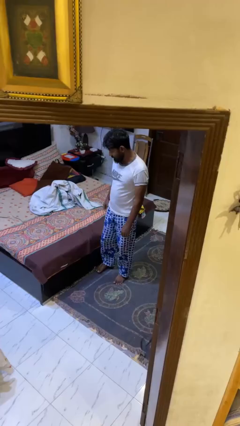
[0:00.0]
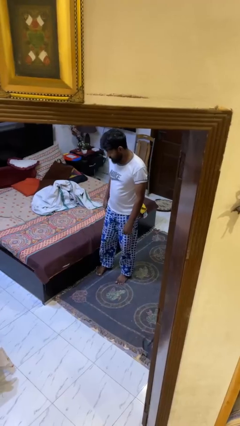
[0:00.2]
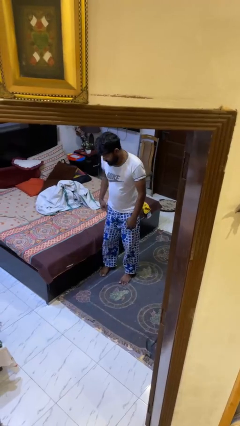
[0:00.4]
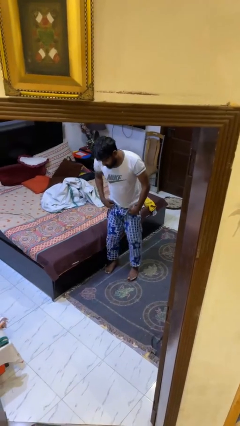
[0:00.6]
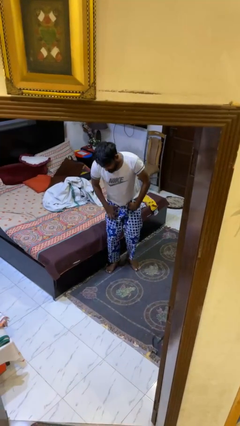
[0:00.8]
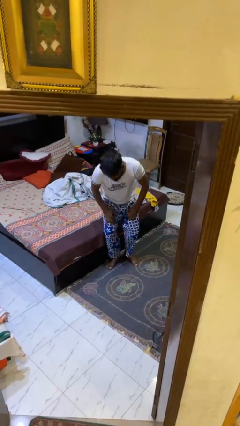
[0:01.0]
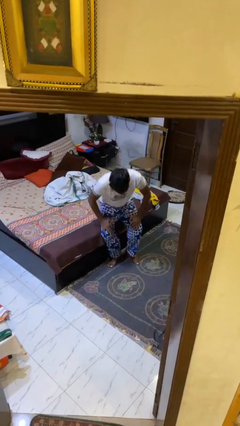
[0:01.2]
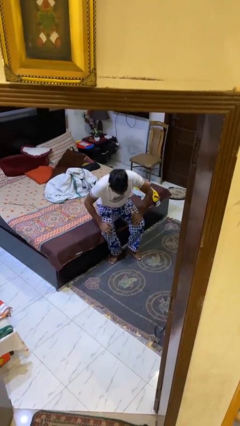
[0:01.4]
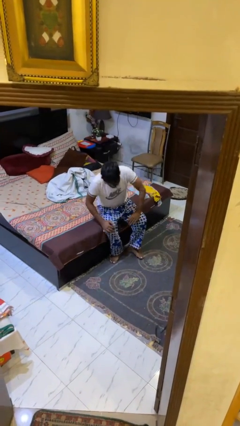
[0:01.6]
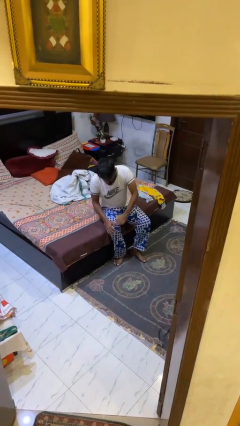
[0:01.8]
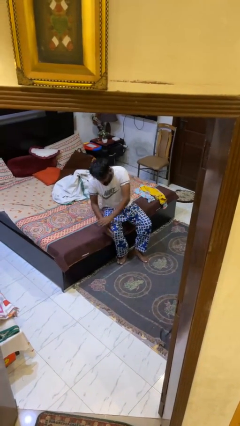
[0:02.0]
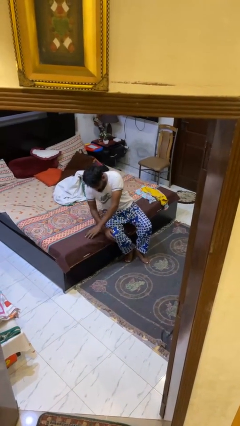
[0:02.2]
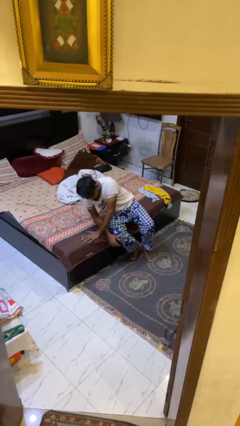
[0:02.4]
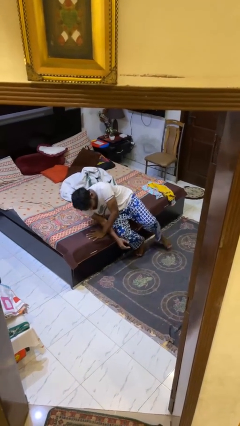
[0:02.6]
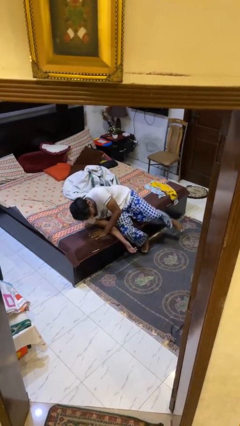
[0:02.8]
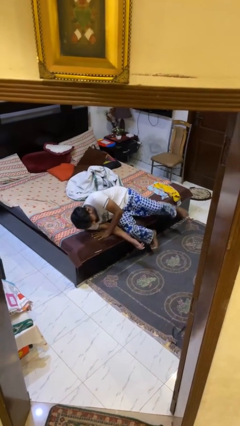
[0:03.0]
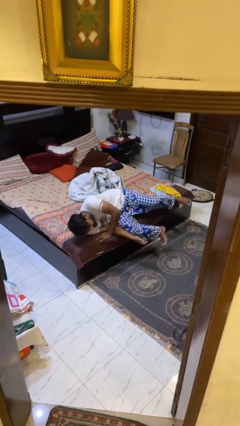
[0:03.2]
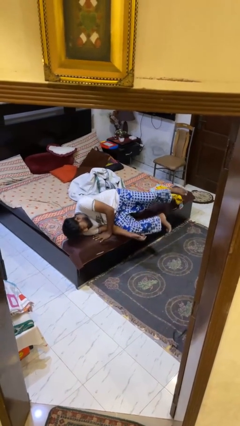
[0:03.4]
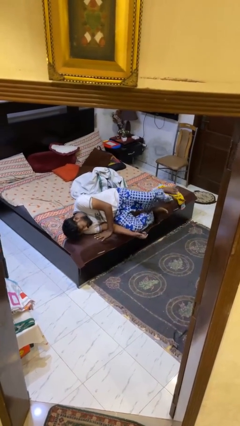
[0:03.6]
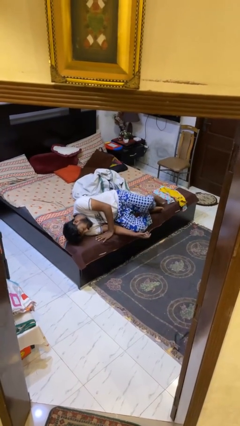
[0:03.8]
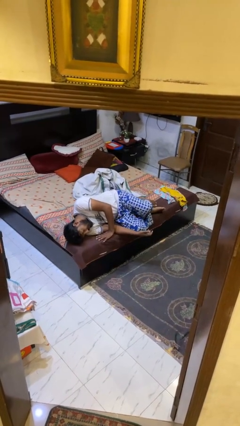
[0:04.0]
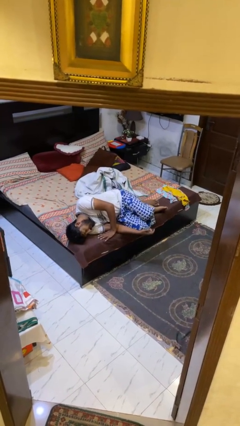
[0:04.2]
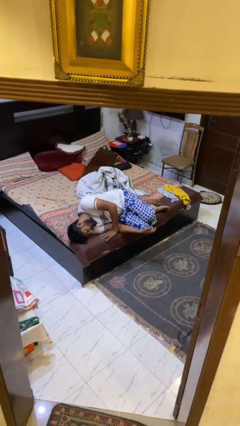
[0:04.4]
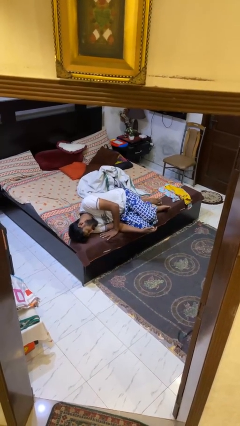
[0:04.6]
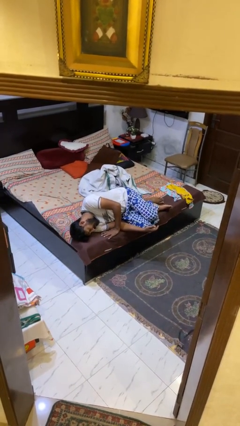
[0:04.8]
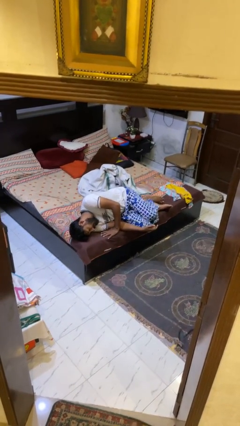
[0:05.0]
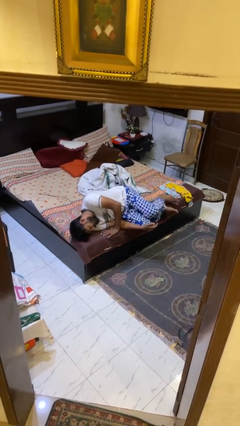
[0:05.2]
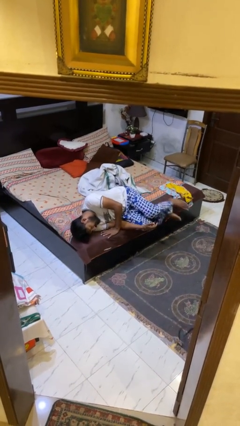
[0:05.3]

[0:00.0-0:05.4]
person lies down on bed

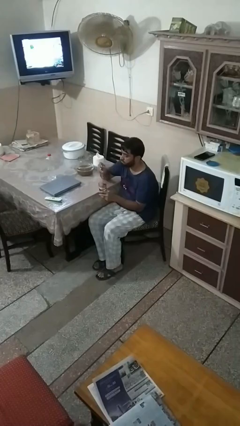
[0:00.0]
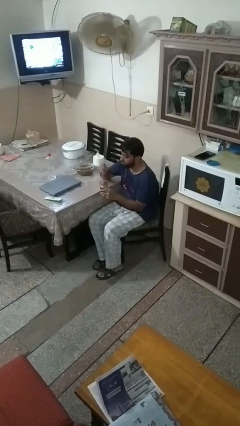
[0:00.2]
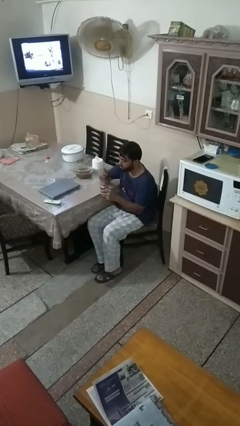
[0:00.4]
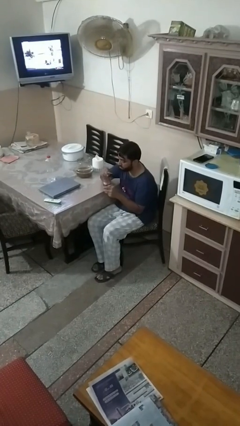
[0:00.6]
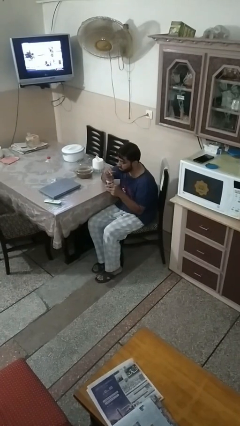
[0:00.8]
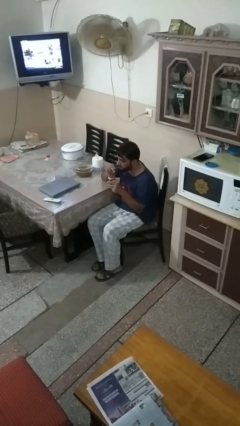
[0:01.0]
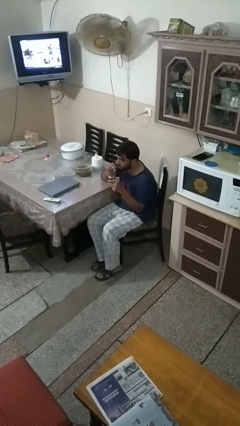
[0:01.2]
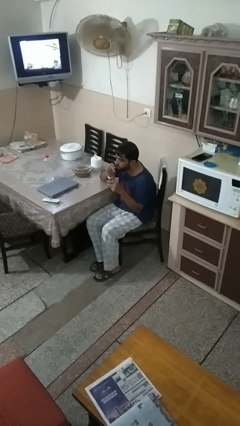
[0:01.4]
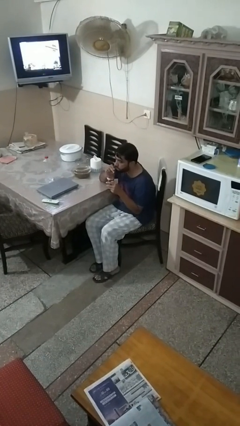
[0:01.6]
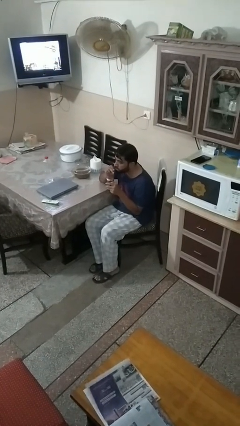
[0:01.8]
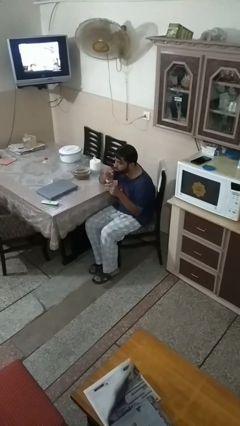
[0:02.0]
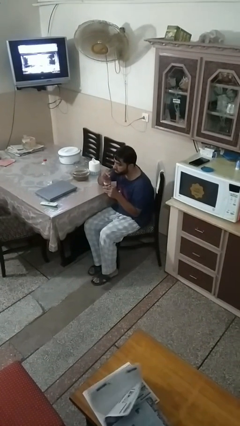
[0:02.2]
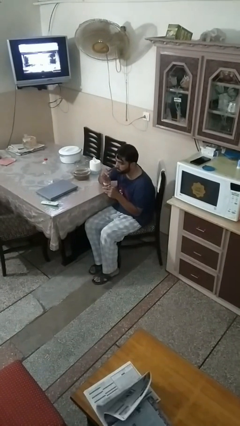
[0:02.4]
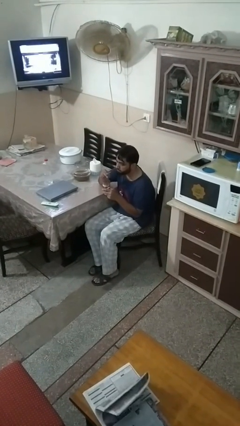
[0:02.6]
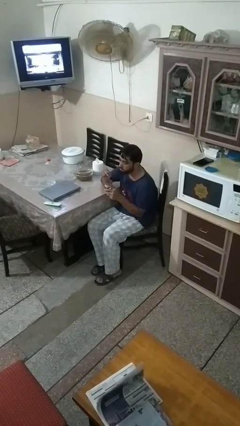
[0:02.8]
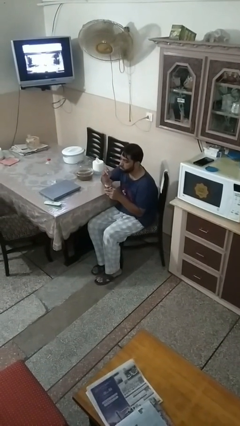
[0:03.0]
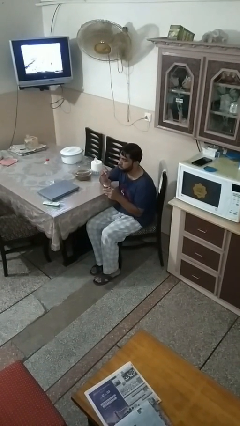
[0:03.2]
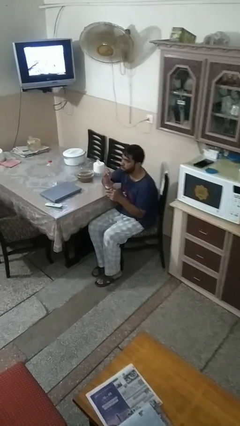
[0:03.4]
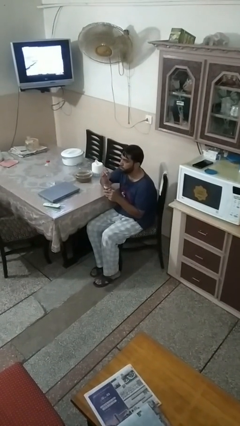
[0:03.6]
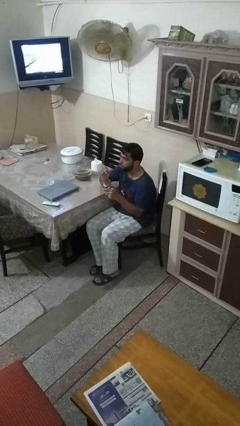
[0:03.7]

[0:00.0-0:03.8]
person drinks from straw

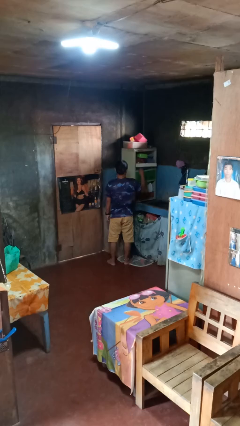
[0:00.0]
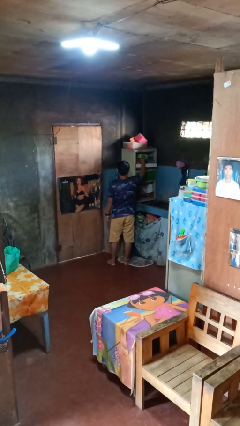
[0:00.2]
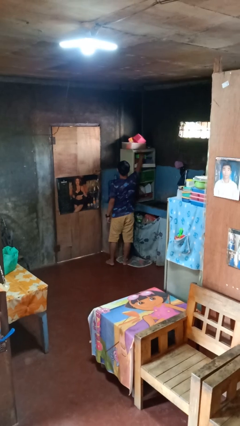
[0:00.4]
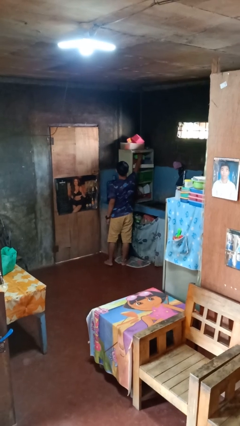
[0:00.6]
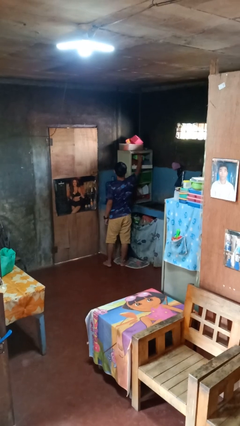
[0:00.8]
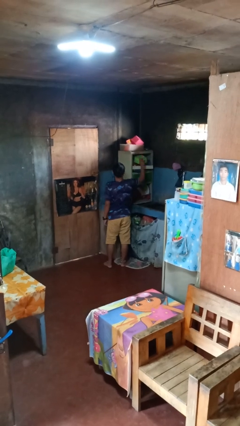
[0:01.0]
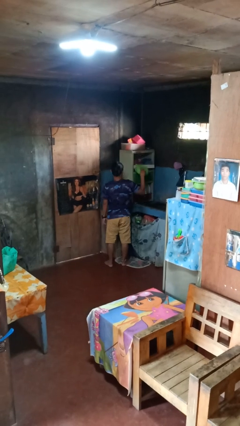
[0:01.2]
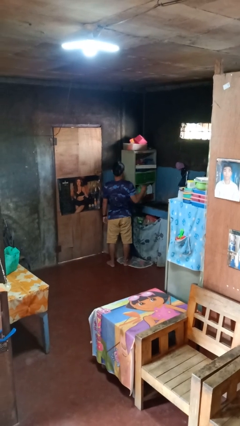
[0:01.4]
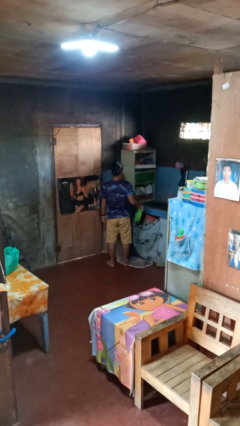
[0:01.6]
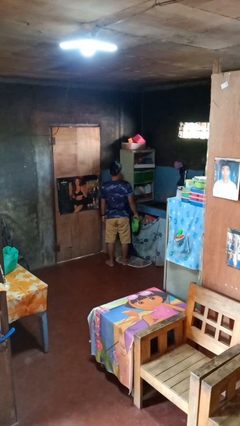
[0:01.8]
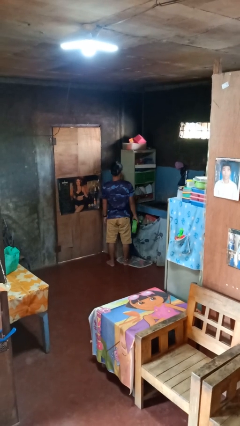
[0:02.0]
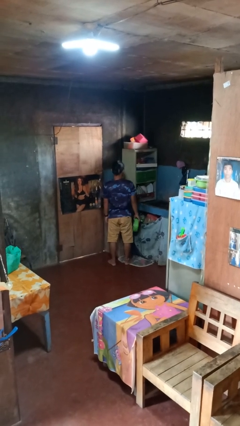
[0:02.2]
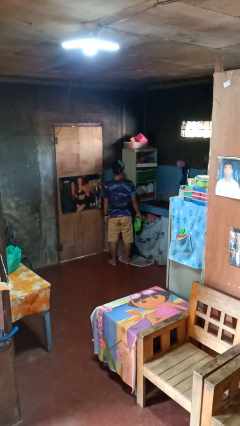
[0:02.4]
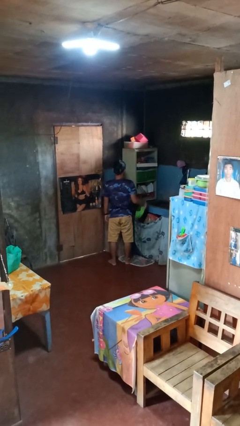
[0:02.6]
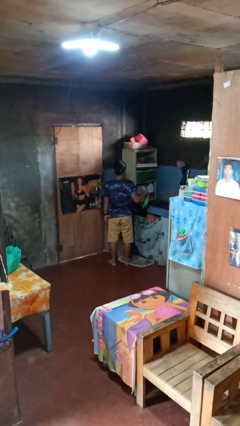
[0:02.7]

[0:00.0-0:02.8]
person takes object from cabinet

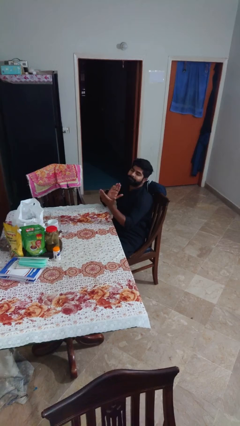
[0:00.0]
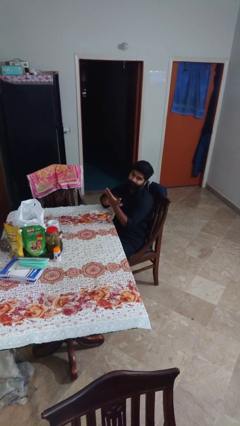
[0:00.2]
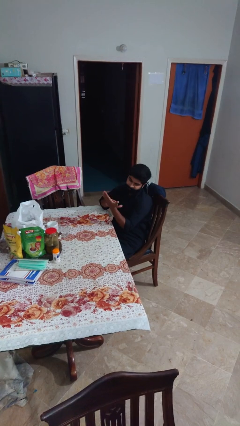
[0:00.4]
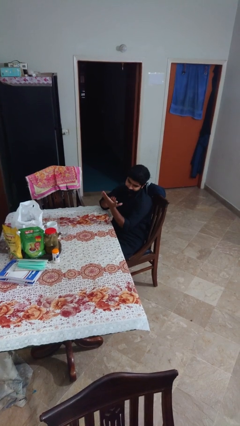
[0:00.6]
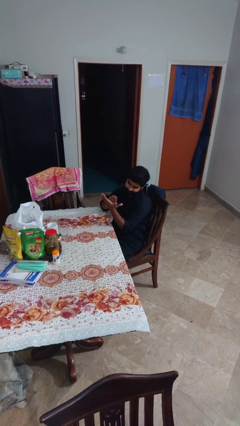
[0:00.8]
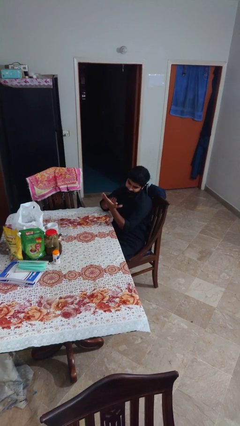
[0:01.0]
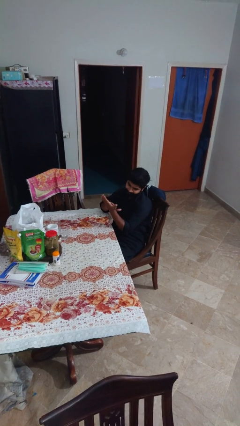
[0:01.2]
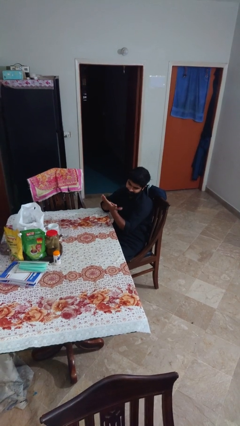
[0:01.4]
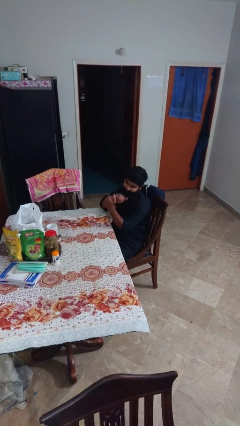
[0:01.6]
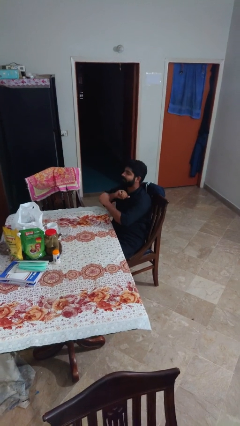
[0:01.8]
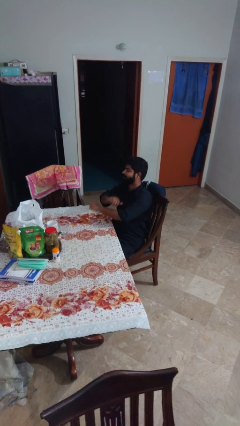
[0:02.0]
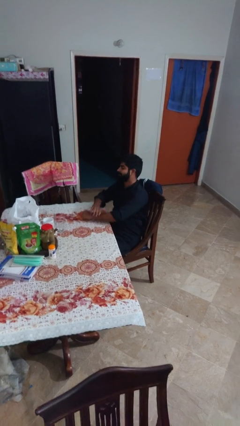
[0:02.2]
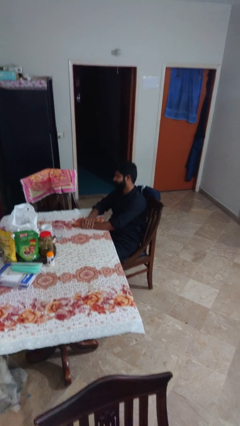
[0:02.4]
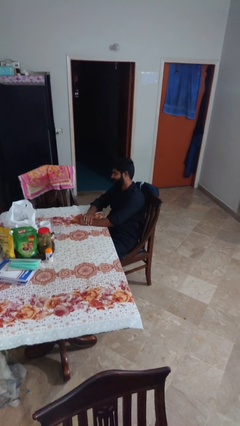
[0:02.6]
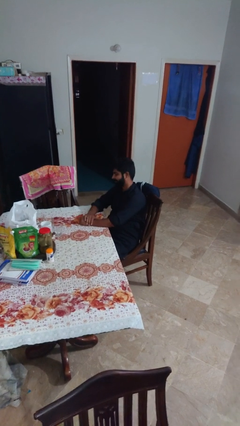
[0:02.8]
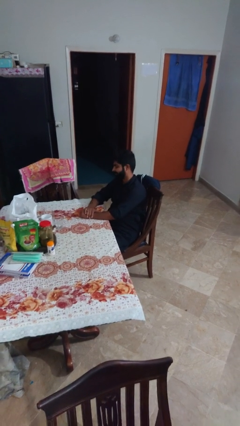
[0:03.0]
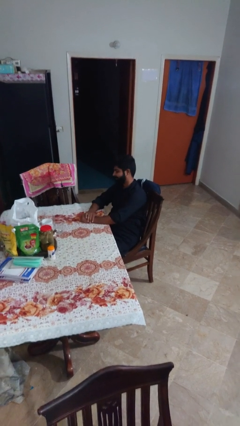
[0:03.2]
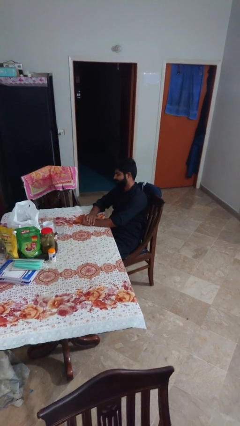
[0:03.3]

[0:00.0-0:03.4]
person claps hands

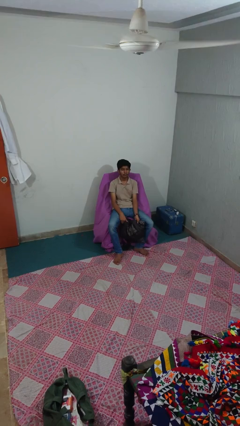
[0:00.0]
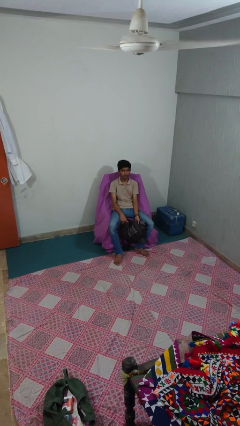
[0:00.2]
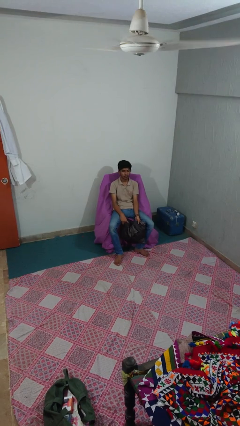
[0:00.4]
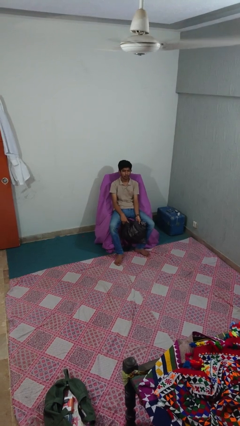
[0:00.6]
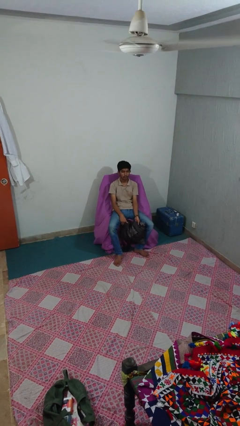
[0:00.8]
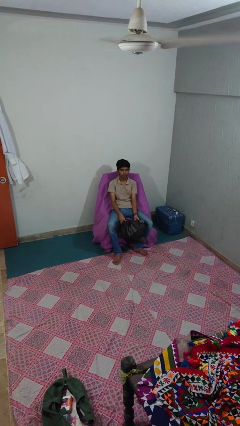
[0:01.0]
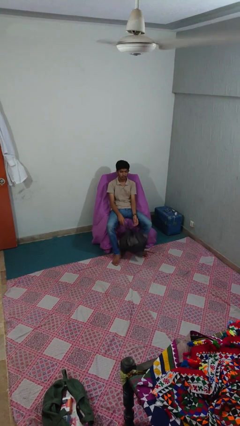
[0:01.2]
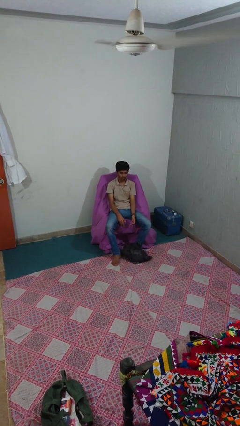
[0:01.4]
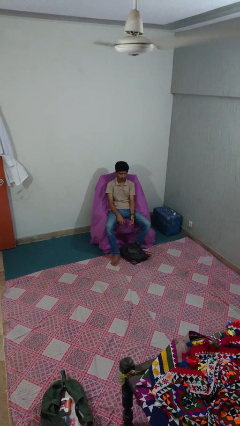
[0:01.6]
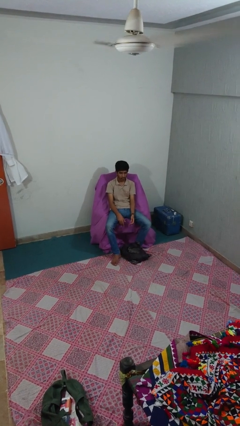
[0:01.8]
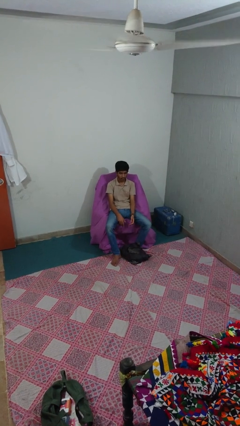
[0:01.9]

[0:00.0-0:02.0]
person drops object

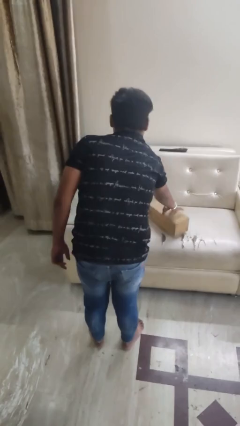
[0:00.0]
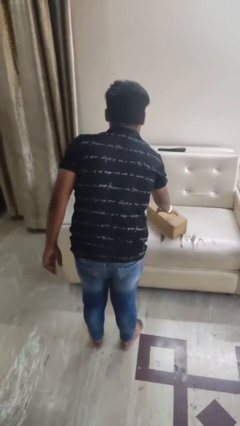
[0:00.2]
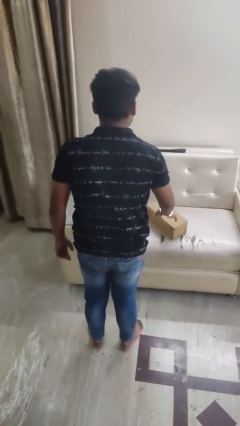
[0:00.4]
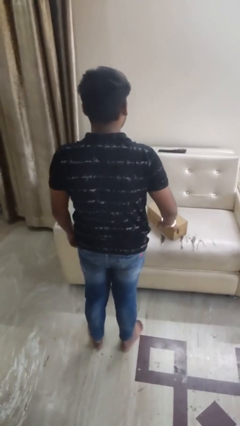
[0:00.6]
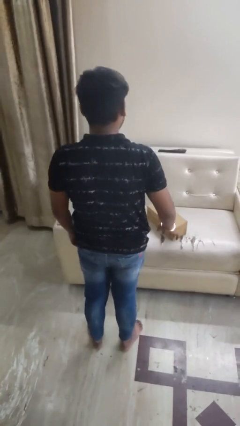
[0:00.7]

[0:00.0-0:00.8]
person puts down object on bed
